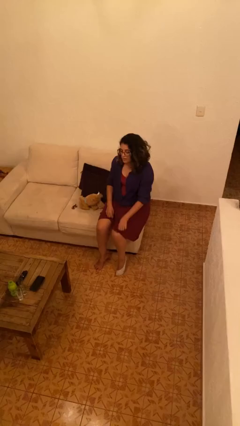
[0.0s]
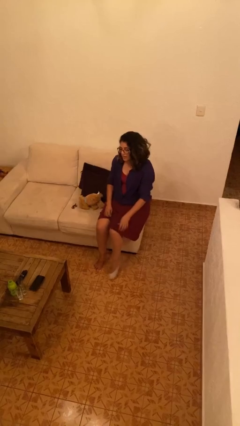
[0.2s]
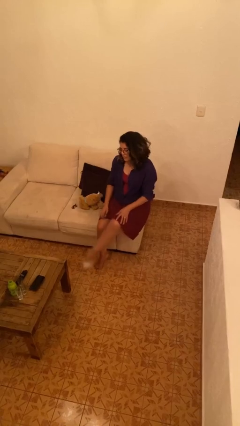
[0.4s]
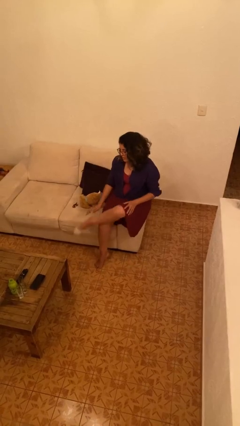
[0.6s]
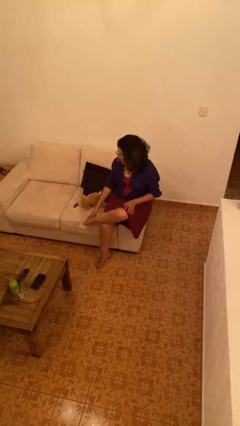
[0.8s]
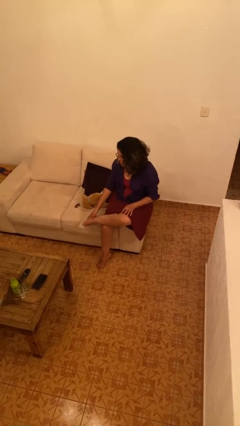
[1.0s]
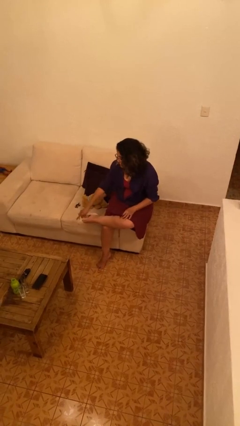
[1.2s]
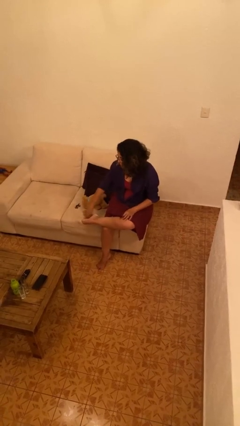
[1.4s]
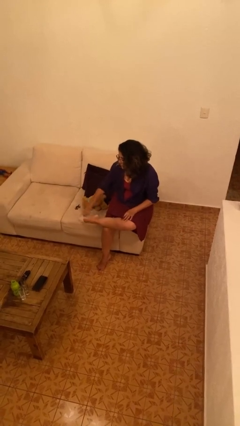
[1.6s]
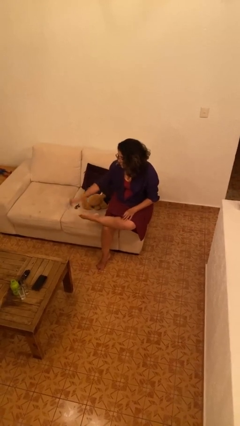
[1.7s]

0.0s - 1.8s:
person takes off socks

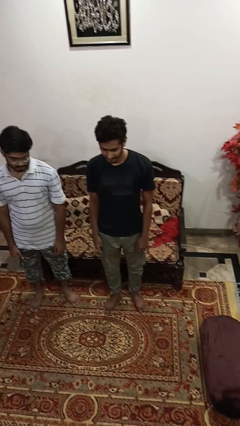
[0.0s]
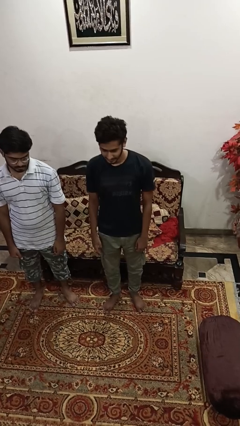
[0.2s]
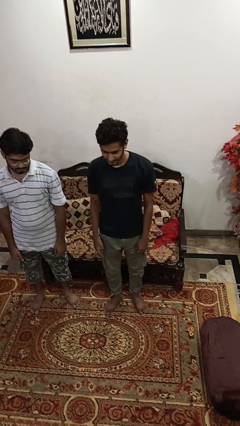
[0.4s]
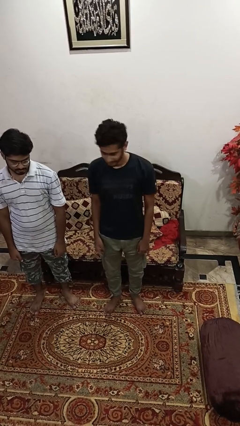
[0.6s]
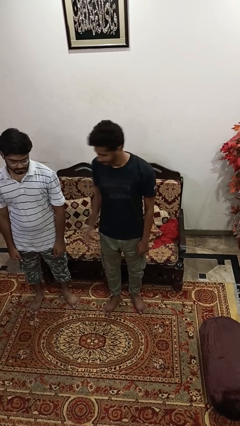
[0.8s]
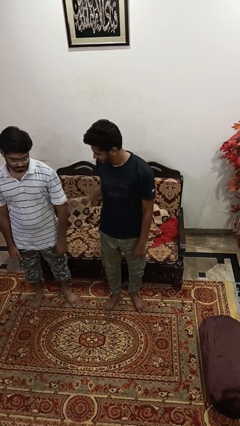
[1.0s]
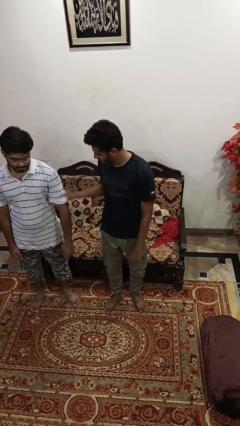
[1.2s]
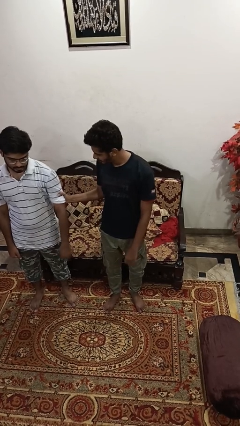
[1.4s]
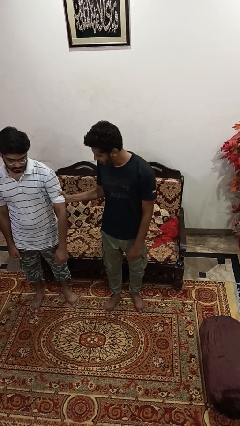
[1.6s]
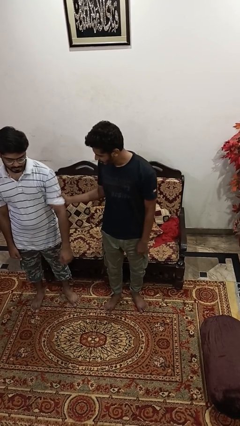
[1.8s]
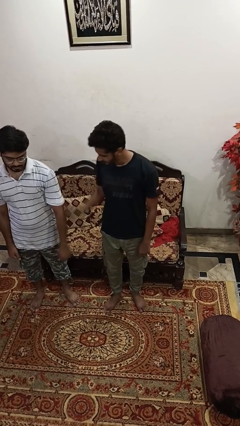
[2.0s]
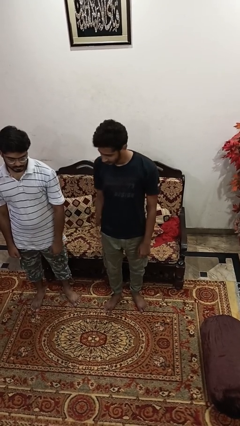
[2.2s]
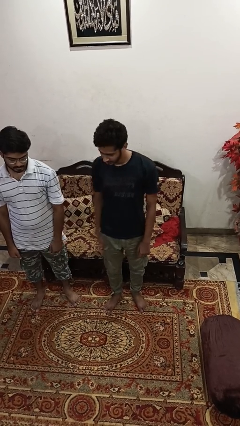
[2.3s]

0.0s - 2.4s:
person grabs person by bicep

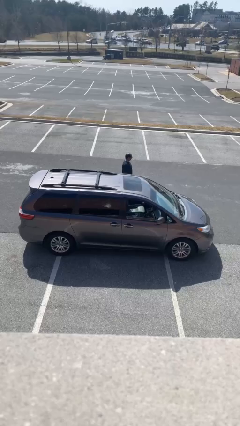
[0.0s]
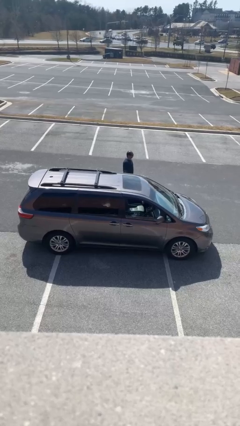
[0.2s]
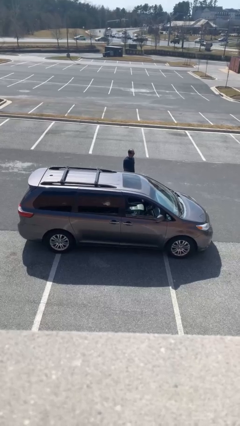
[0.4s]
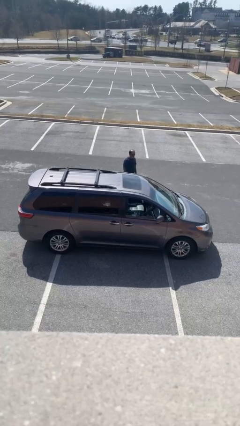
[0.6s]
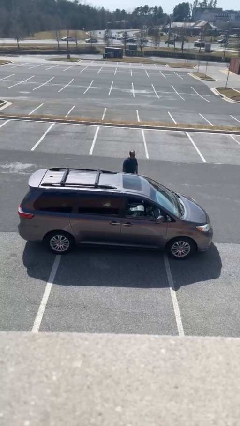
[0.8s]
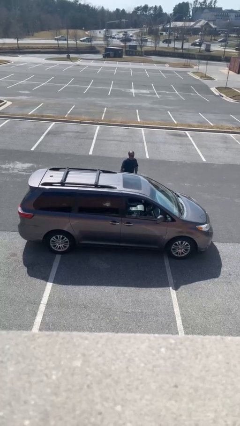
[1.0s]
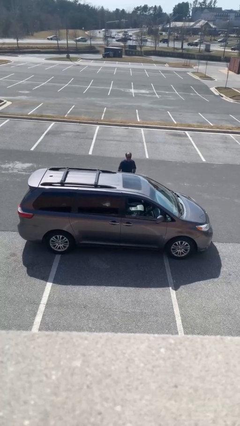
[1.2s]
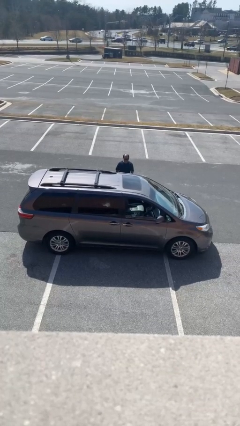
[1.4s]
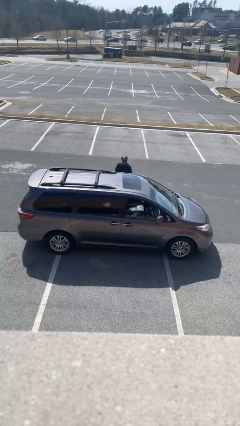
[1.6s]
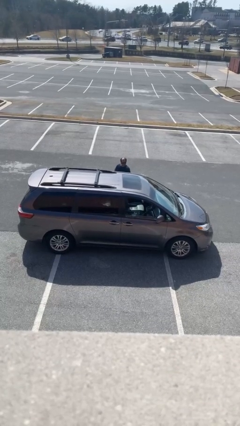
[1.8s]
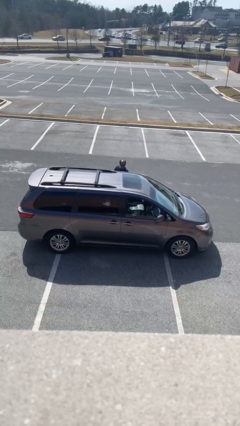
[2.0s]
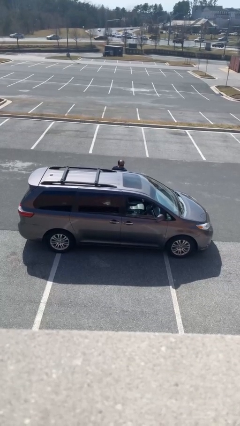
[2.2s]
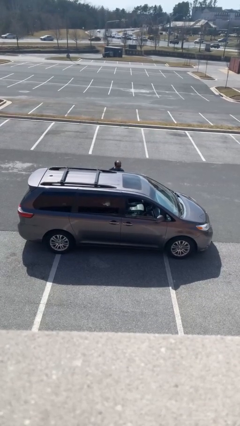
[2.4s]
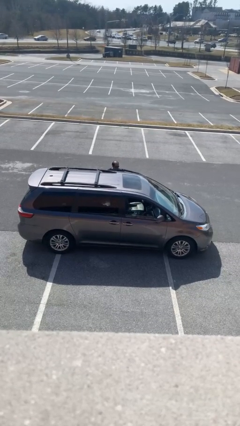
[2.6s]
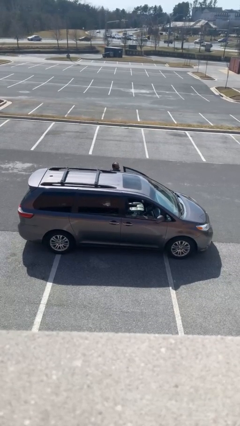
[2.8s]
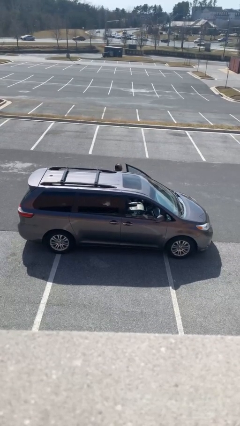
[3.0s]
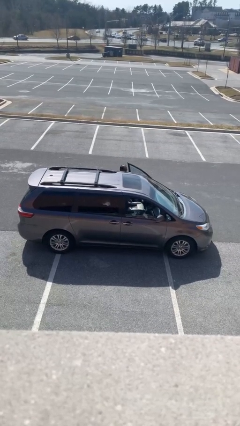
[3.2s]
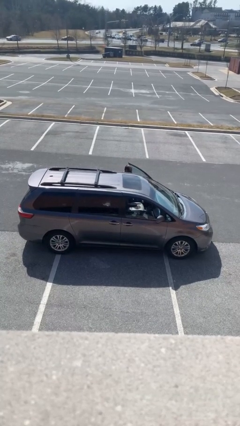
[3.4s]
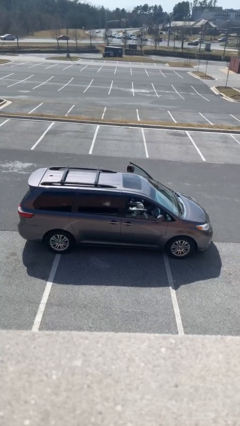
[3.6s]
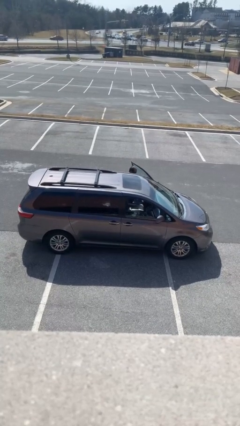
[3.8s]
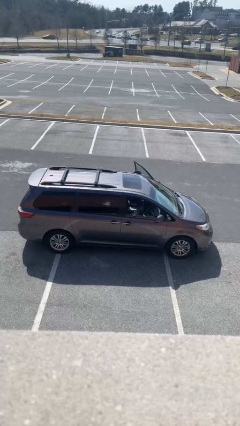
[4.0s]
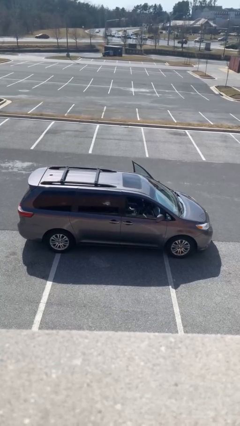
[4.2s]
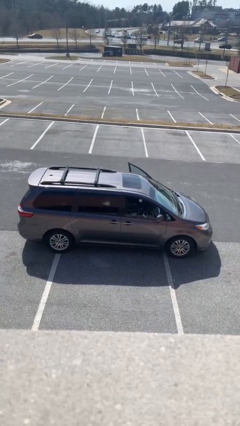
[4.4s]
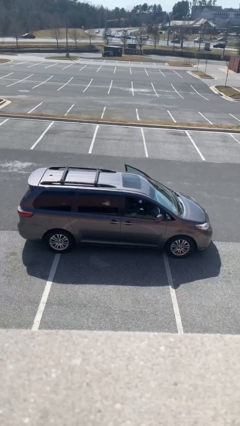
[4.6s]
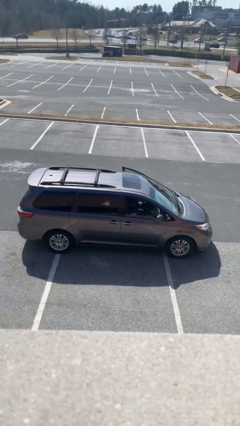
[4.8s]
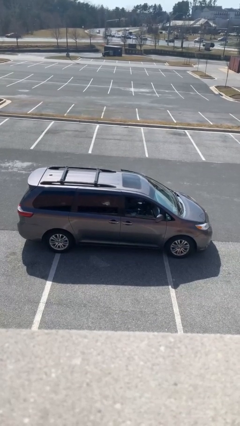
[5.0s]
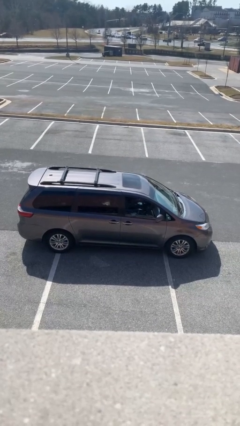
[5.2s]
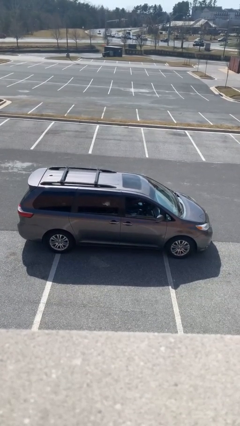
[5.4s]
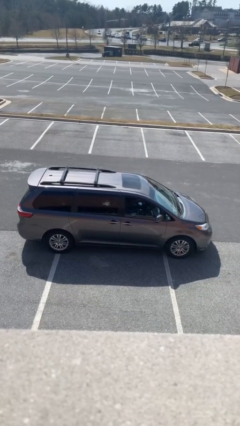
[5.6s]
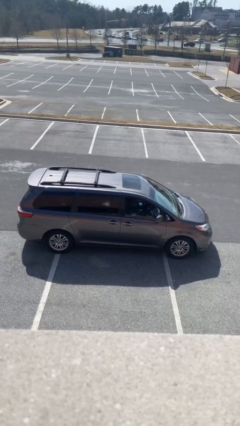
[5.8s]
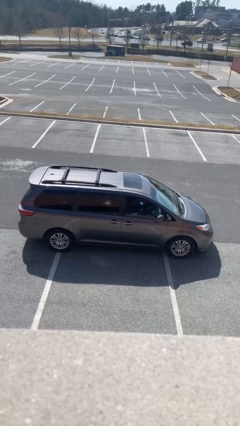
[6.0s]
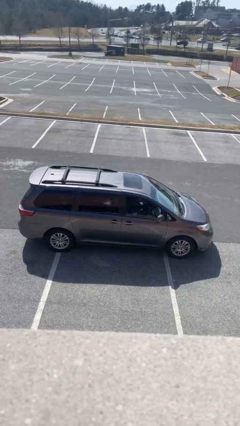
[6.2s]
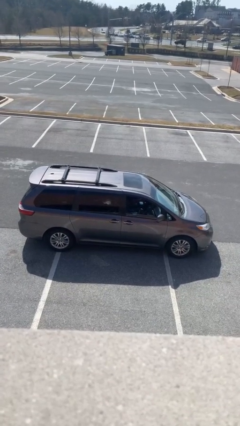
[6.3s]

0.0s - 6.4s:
car picks up person

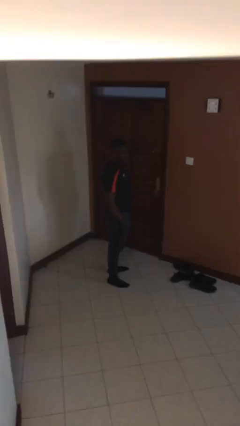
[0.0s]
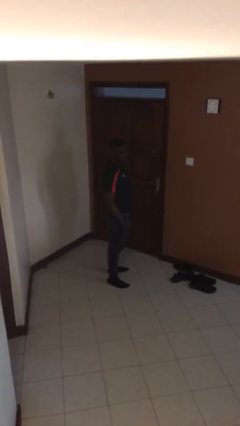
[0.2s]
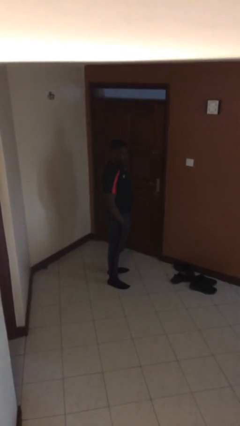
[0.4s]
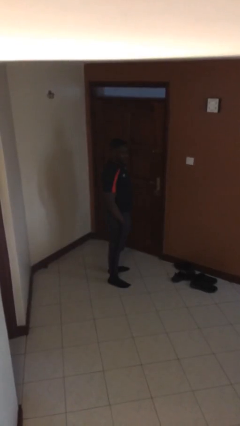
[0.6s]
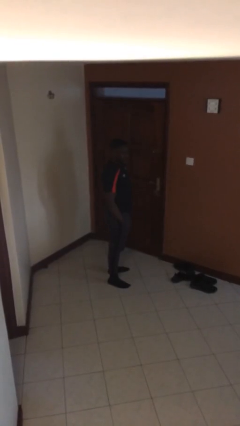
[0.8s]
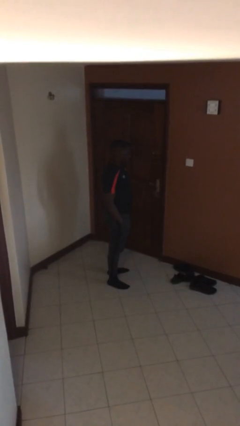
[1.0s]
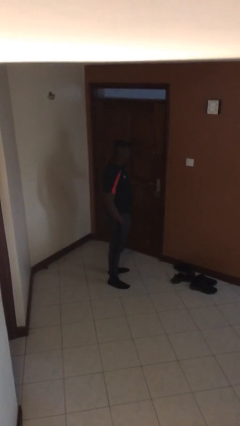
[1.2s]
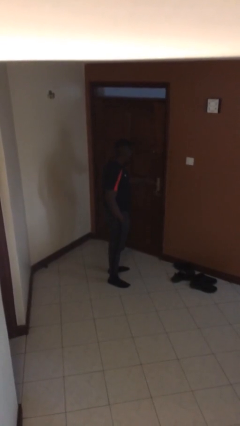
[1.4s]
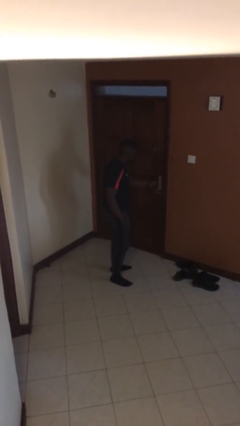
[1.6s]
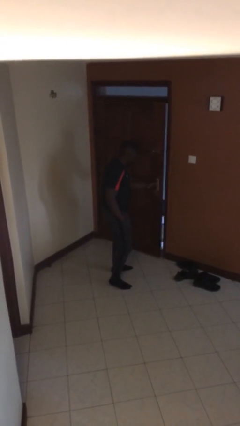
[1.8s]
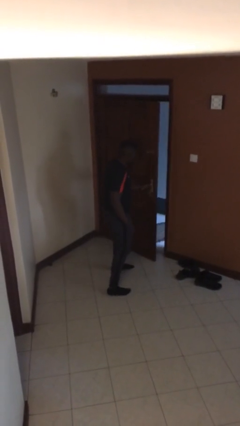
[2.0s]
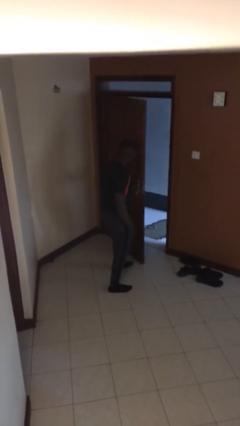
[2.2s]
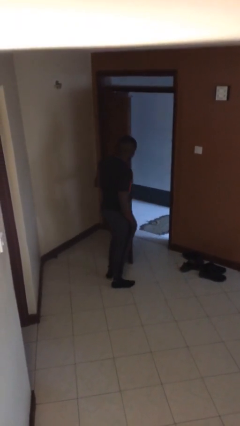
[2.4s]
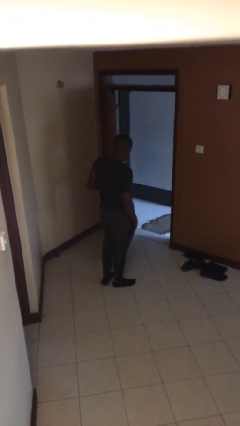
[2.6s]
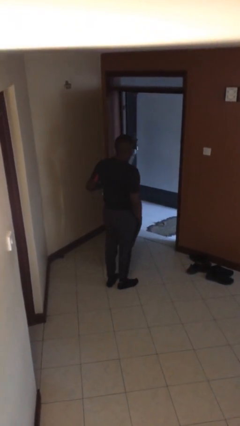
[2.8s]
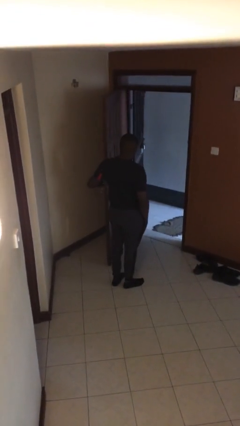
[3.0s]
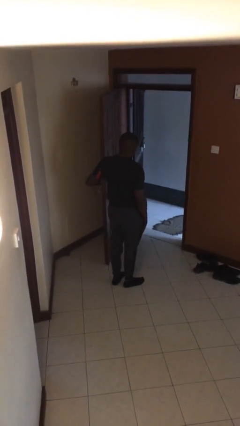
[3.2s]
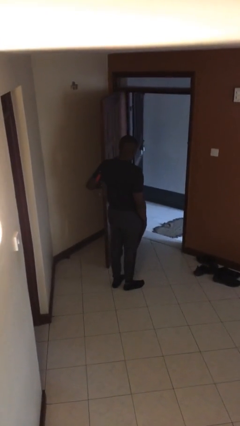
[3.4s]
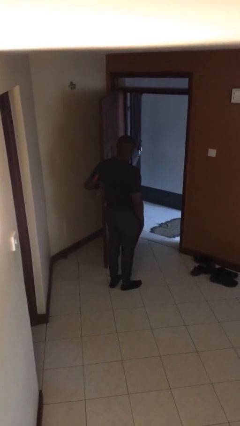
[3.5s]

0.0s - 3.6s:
person opens facility door

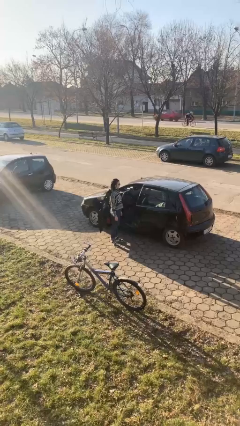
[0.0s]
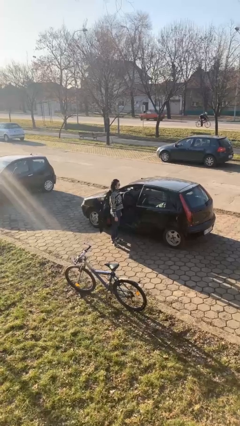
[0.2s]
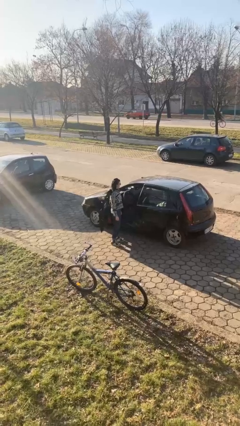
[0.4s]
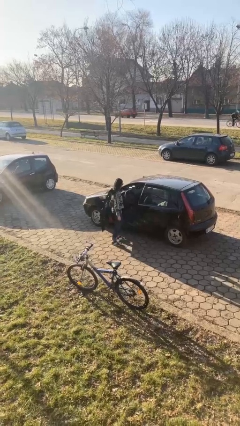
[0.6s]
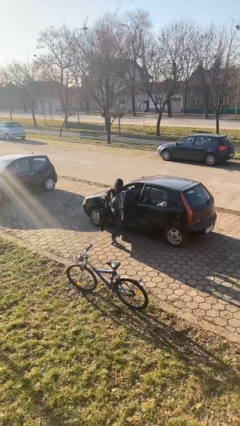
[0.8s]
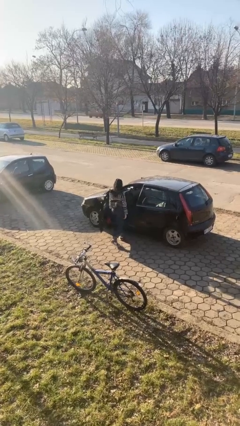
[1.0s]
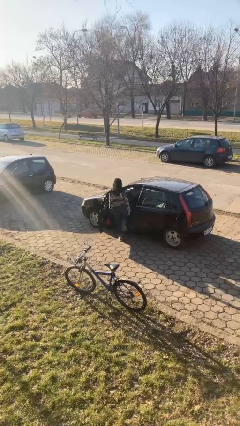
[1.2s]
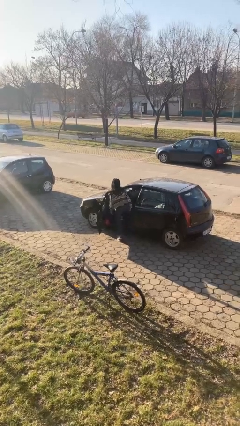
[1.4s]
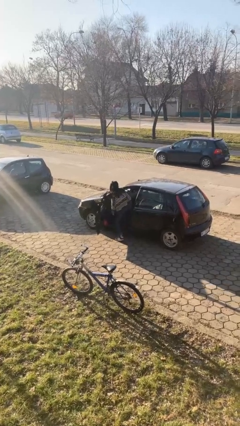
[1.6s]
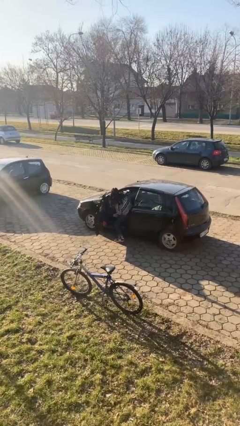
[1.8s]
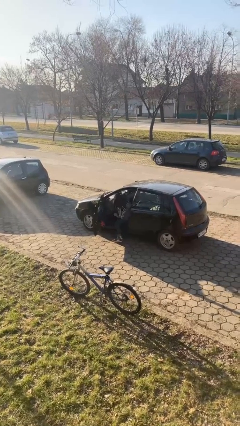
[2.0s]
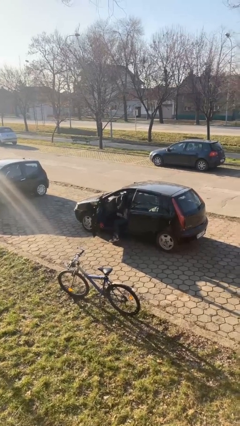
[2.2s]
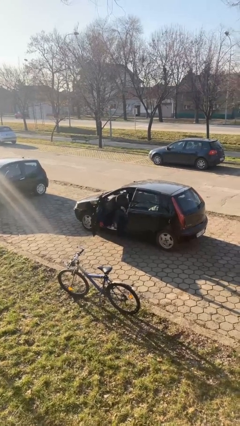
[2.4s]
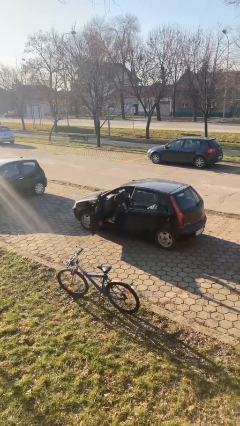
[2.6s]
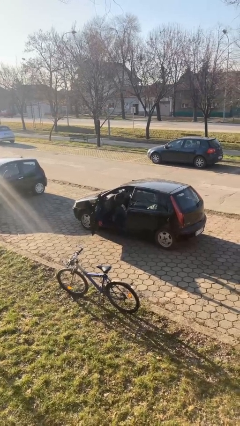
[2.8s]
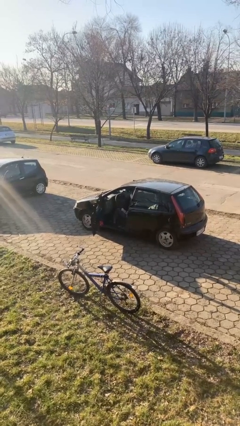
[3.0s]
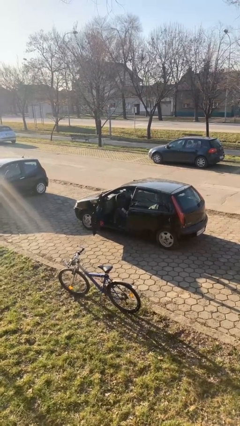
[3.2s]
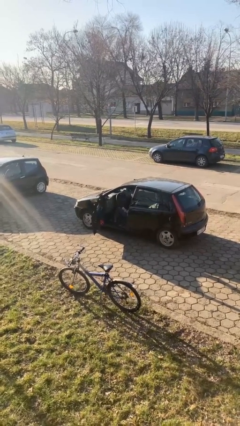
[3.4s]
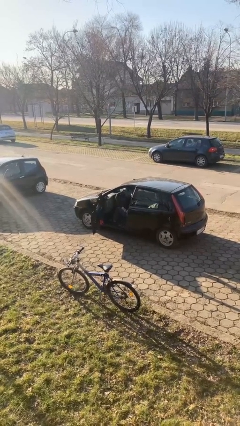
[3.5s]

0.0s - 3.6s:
person enters car
